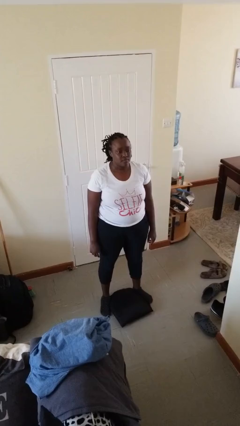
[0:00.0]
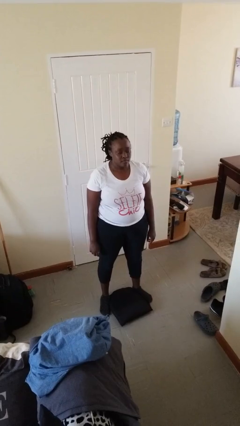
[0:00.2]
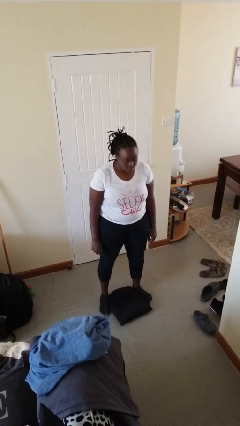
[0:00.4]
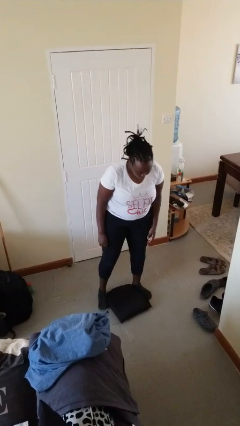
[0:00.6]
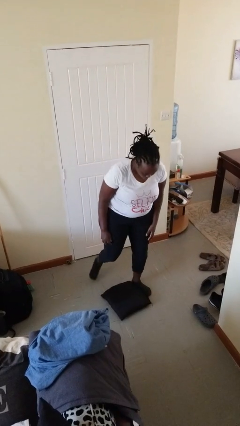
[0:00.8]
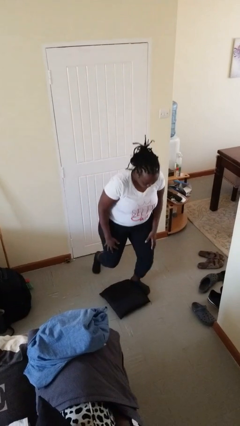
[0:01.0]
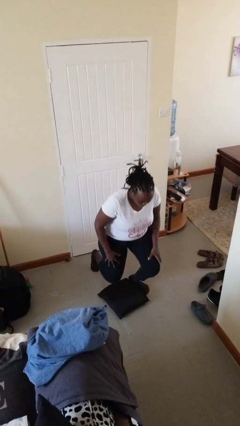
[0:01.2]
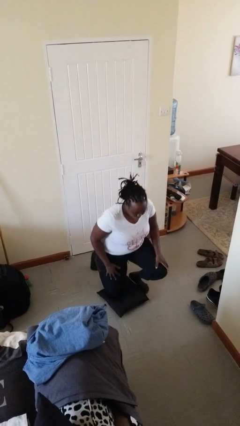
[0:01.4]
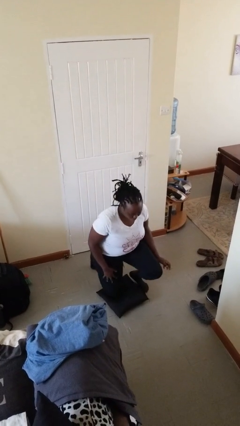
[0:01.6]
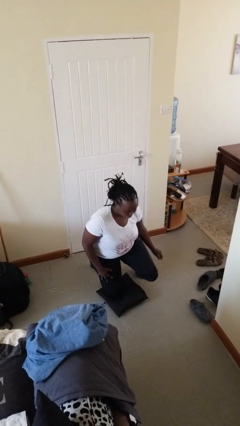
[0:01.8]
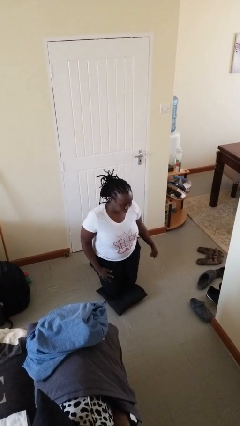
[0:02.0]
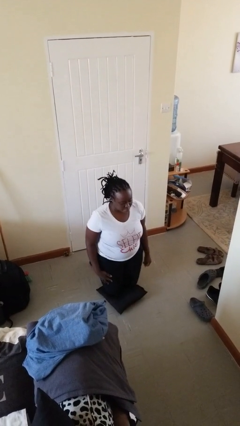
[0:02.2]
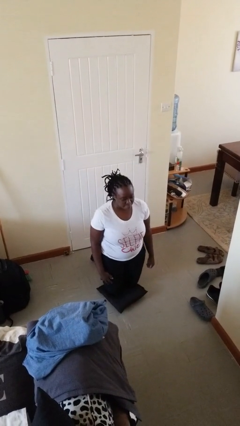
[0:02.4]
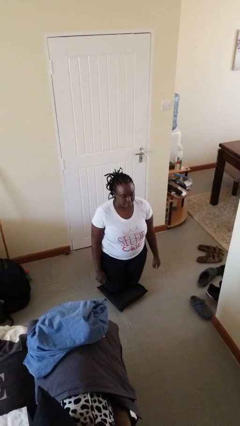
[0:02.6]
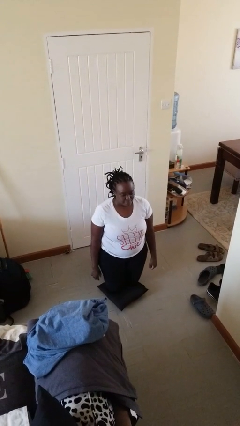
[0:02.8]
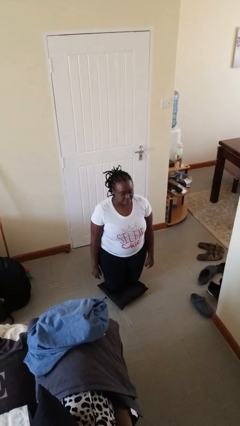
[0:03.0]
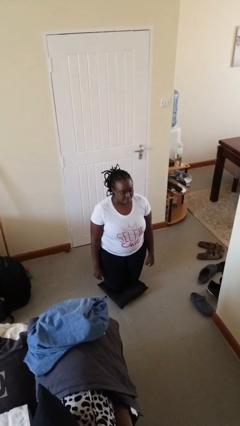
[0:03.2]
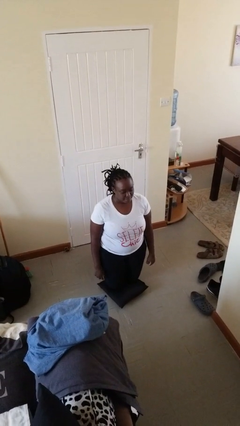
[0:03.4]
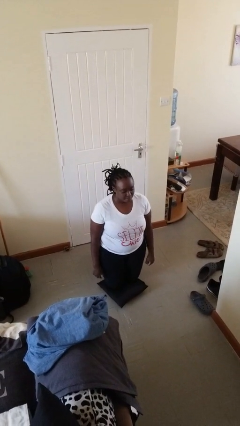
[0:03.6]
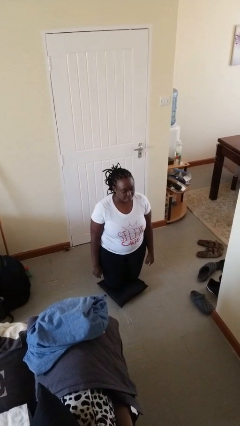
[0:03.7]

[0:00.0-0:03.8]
person kneels

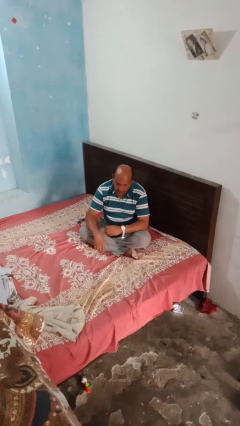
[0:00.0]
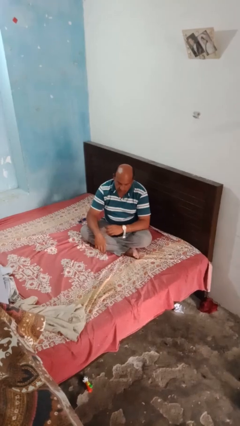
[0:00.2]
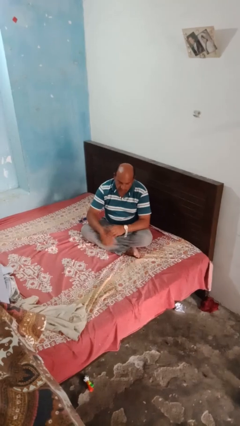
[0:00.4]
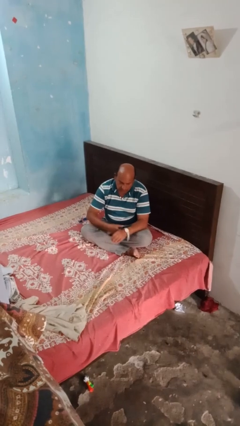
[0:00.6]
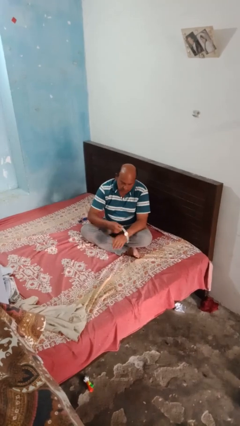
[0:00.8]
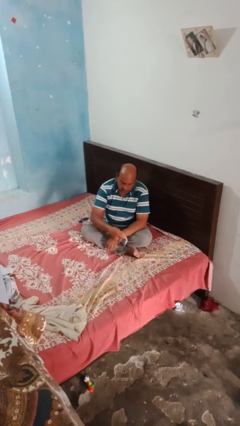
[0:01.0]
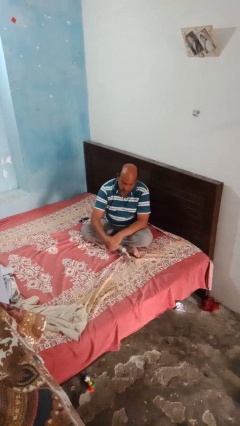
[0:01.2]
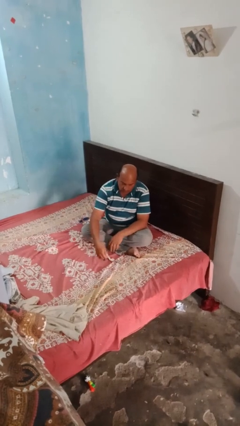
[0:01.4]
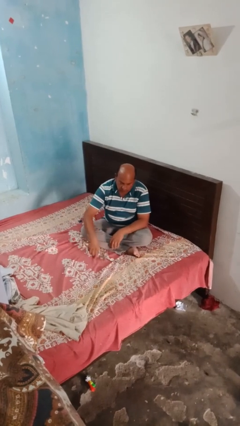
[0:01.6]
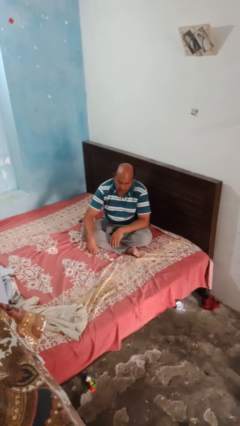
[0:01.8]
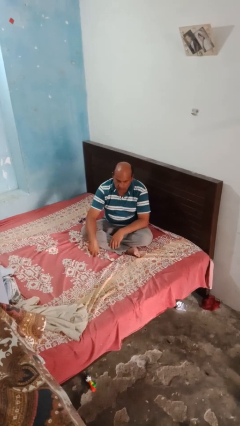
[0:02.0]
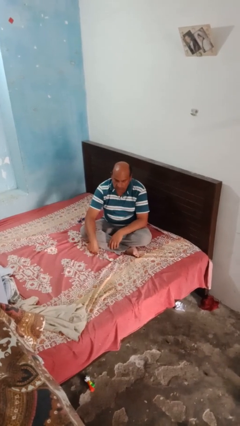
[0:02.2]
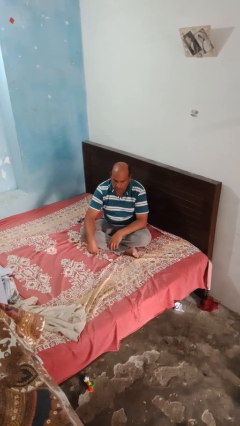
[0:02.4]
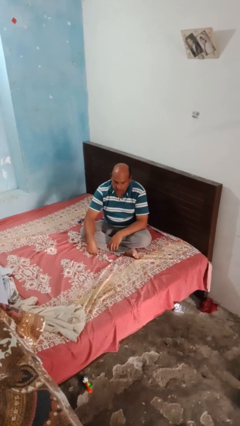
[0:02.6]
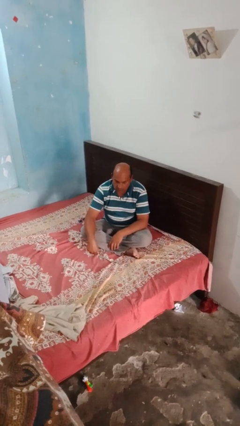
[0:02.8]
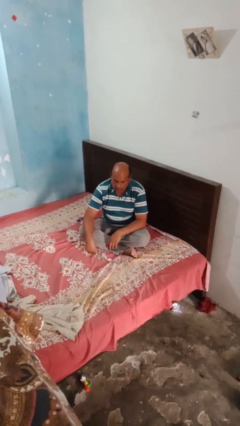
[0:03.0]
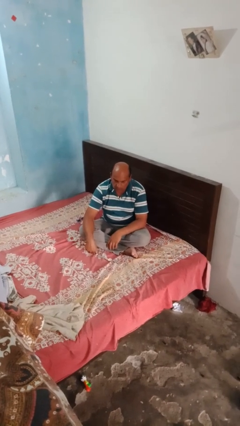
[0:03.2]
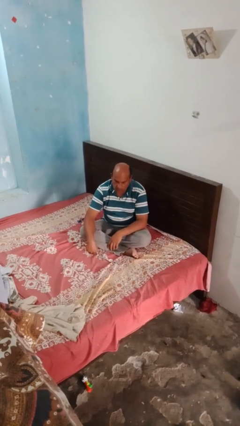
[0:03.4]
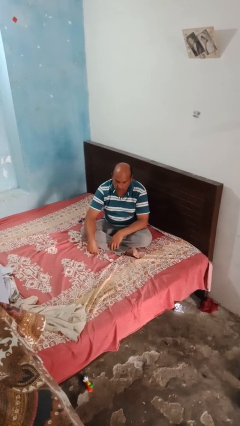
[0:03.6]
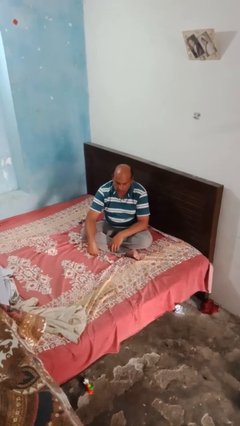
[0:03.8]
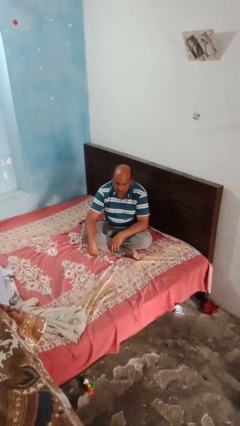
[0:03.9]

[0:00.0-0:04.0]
person takes off wristwatch

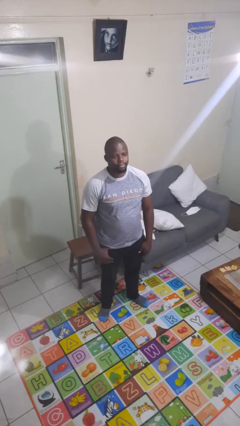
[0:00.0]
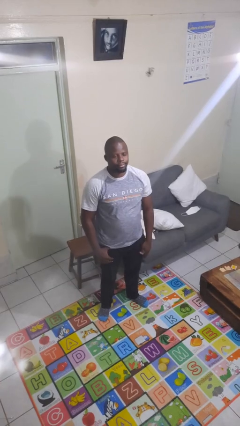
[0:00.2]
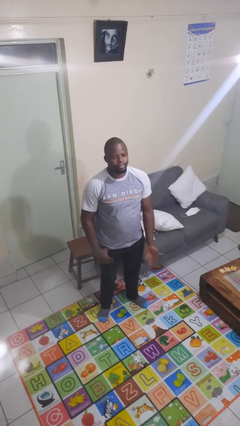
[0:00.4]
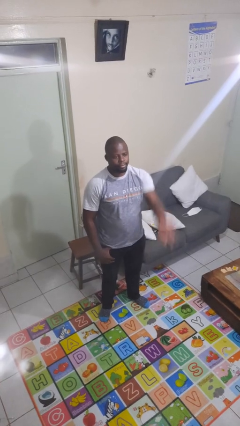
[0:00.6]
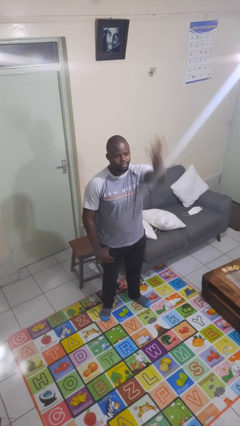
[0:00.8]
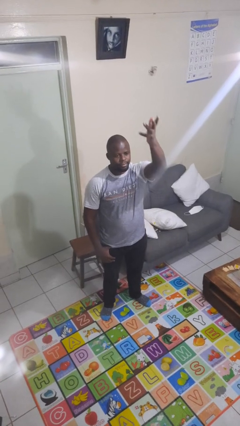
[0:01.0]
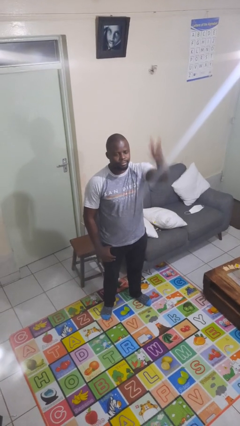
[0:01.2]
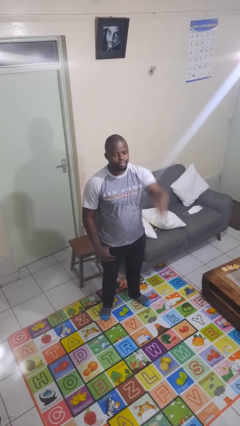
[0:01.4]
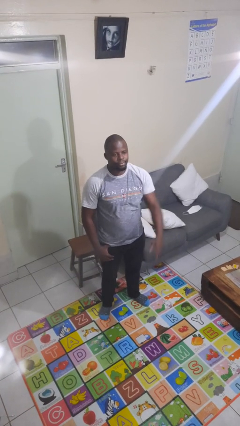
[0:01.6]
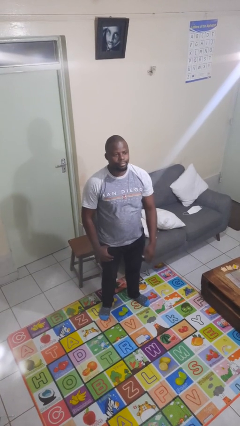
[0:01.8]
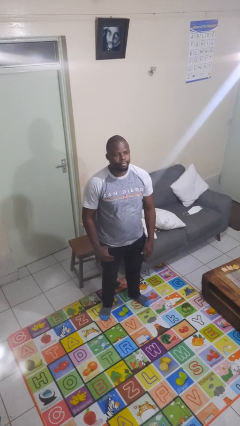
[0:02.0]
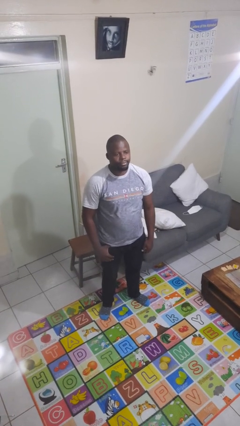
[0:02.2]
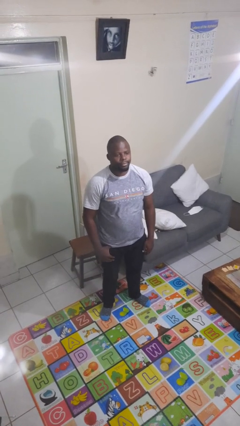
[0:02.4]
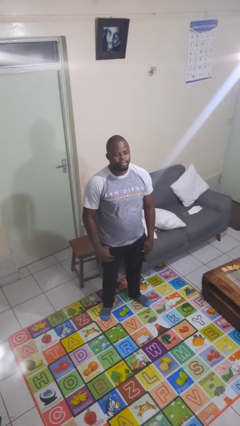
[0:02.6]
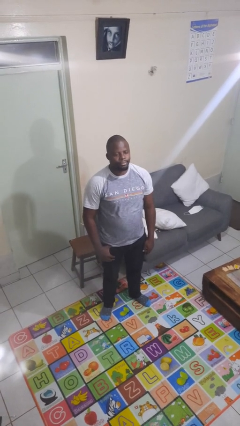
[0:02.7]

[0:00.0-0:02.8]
person gestures swipe up

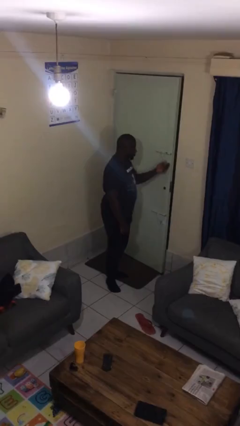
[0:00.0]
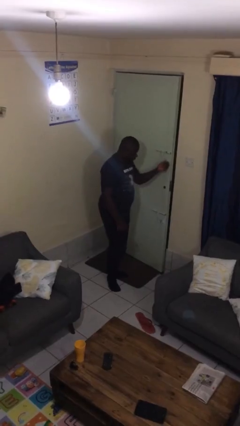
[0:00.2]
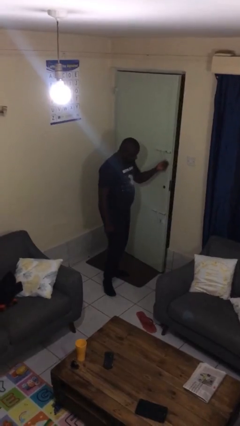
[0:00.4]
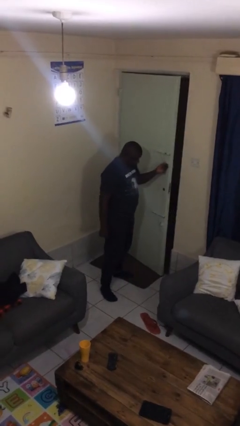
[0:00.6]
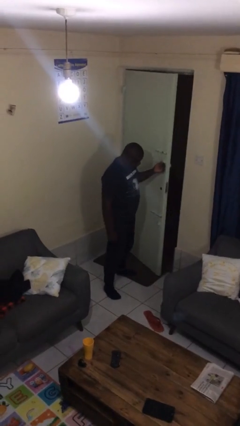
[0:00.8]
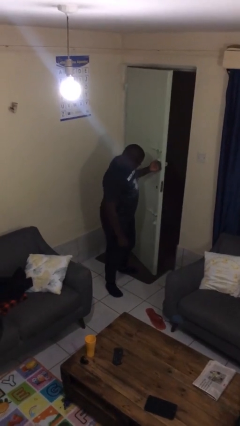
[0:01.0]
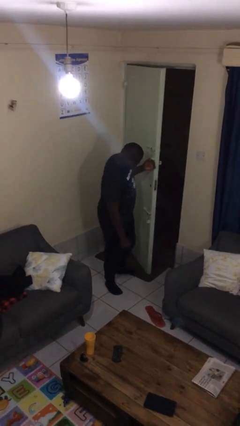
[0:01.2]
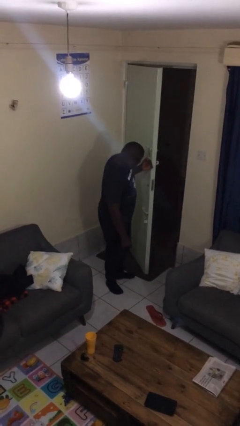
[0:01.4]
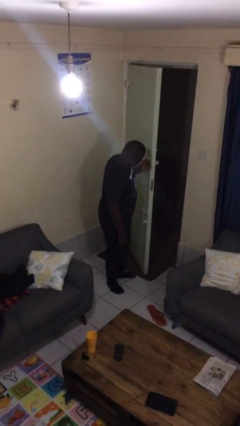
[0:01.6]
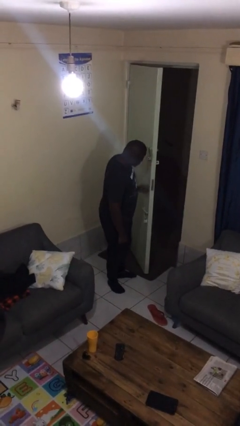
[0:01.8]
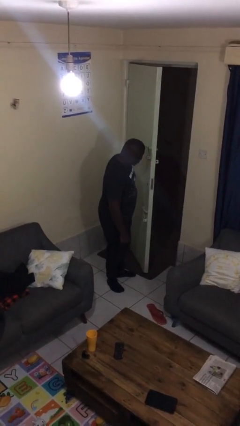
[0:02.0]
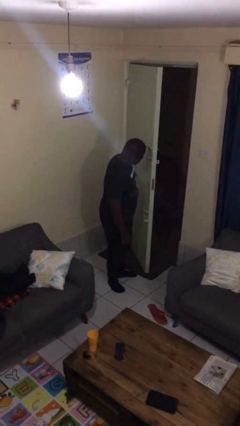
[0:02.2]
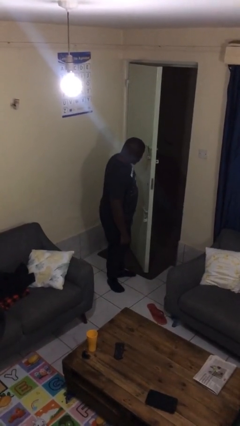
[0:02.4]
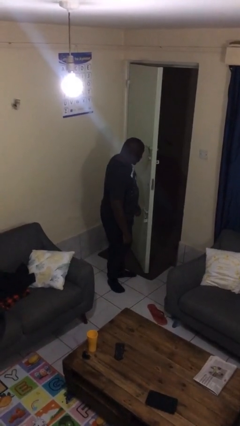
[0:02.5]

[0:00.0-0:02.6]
person opens facility door

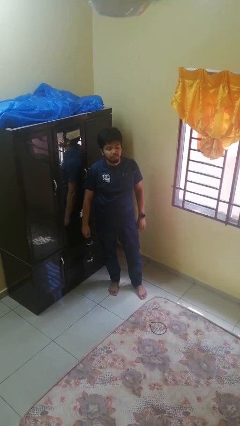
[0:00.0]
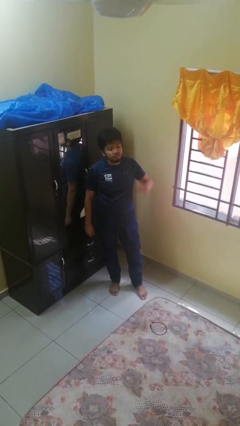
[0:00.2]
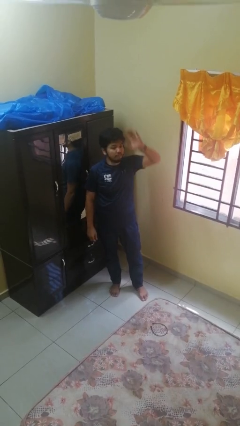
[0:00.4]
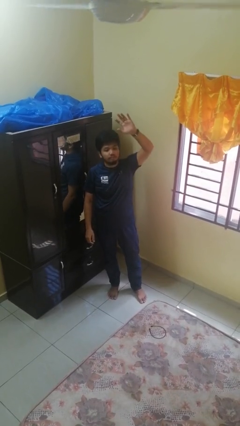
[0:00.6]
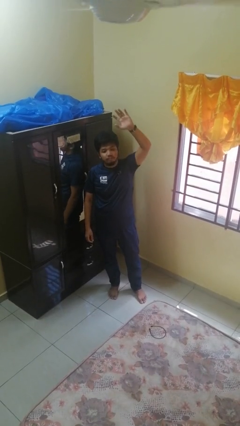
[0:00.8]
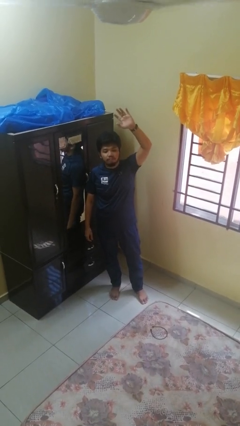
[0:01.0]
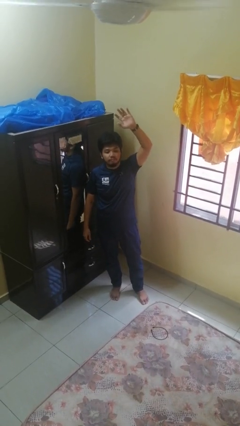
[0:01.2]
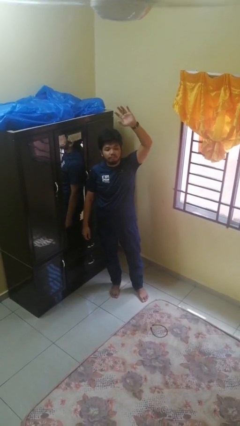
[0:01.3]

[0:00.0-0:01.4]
person gestures raise hand

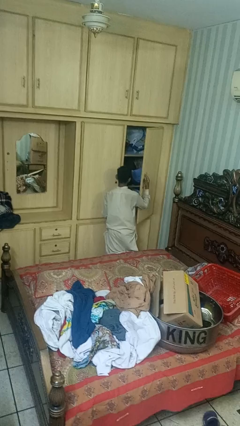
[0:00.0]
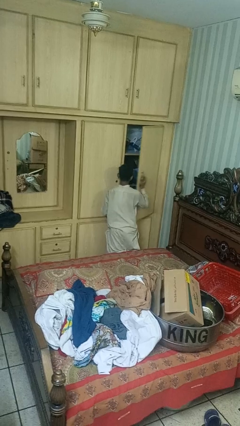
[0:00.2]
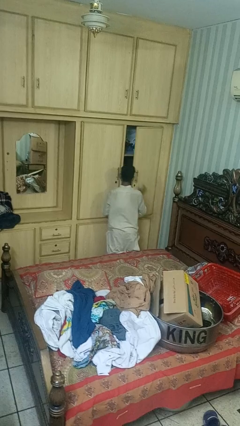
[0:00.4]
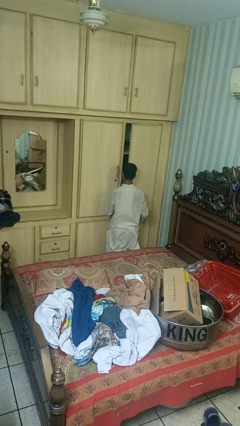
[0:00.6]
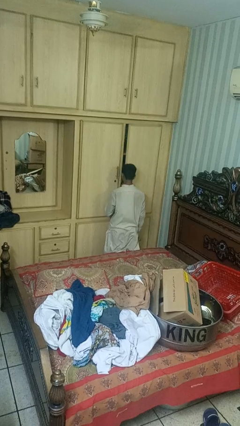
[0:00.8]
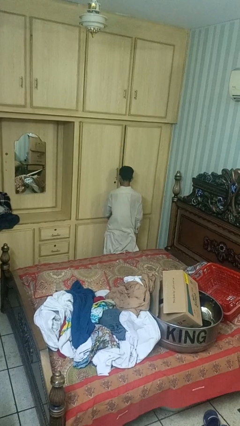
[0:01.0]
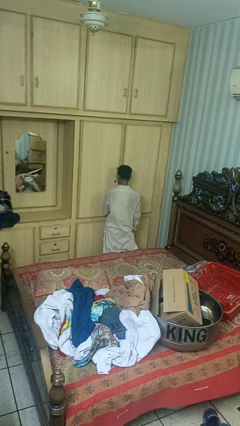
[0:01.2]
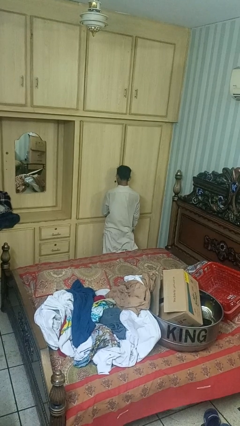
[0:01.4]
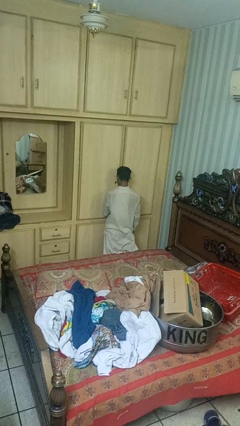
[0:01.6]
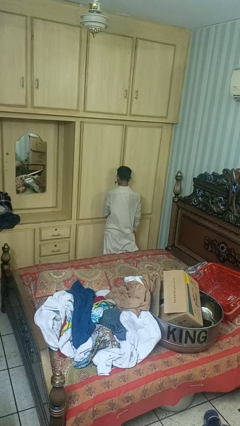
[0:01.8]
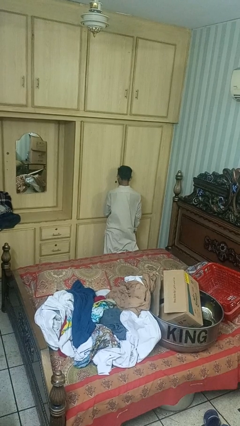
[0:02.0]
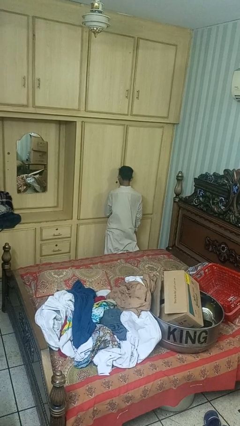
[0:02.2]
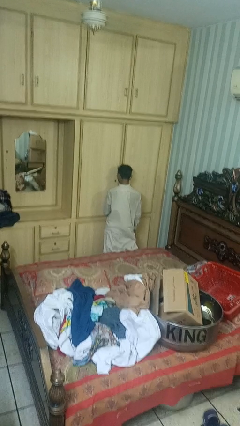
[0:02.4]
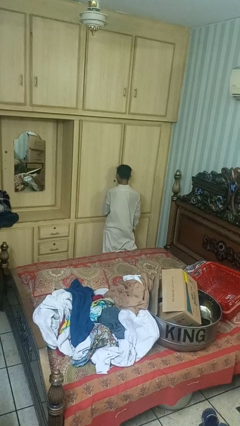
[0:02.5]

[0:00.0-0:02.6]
person closes closet door

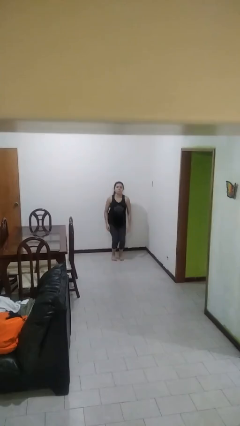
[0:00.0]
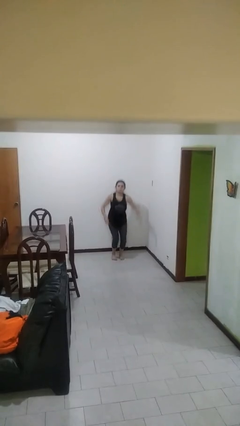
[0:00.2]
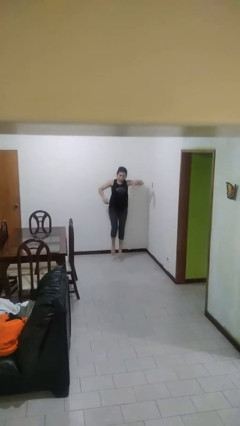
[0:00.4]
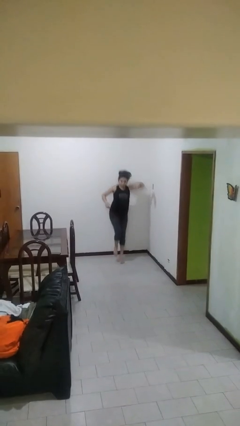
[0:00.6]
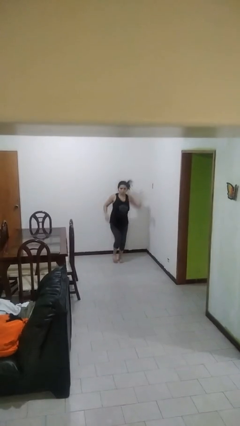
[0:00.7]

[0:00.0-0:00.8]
person jumps
